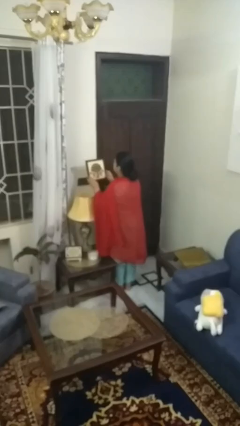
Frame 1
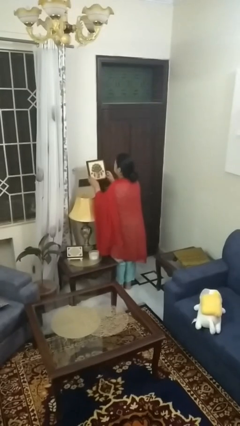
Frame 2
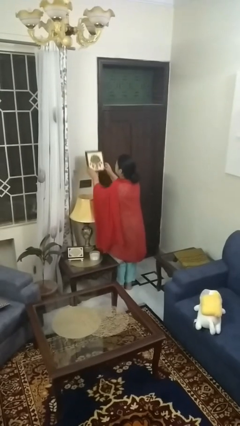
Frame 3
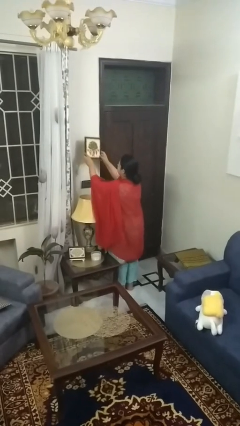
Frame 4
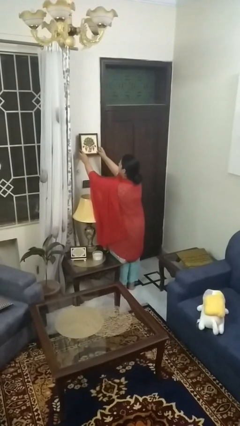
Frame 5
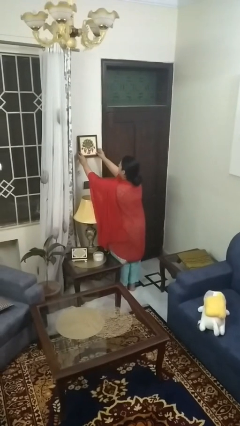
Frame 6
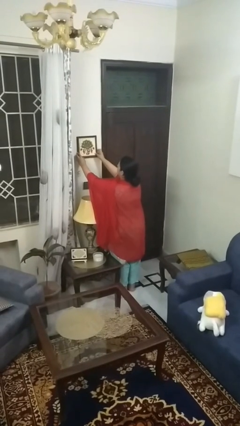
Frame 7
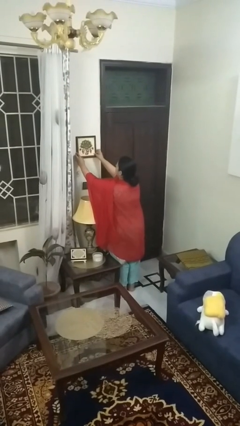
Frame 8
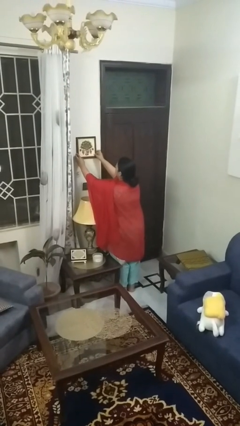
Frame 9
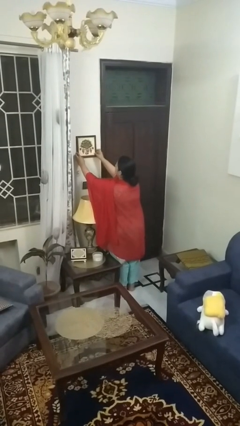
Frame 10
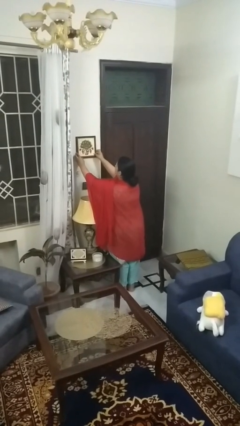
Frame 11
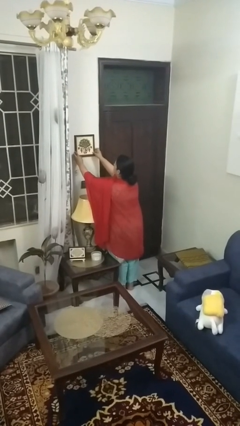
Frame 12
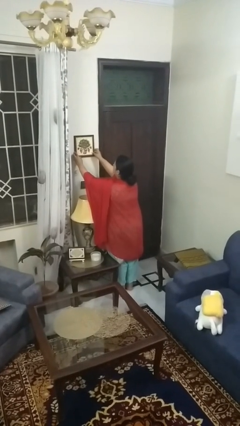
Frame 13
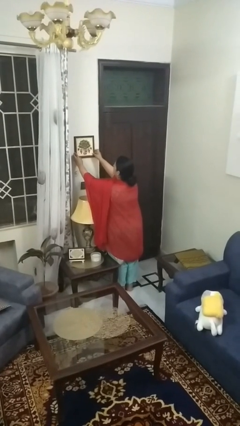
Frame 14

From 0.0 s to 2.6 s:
person puts up picture frame

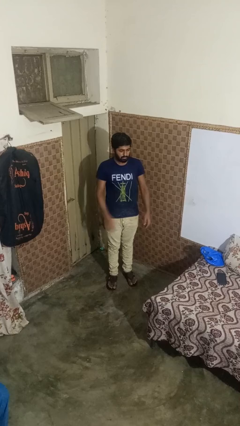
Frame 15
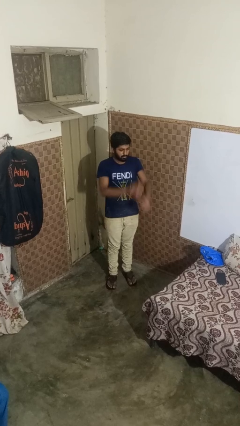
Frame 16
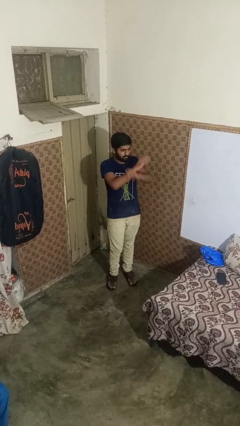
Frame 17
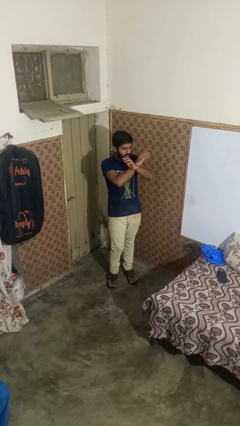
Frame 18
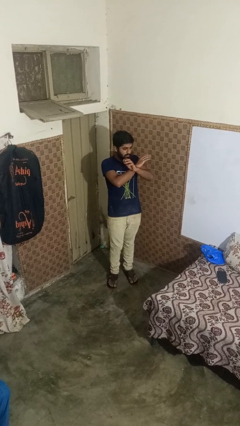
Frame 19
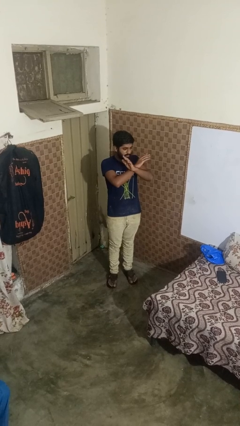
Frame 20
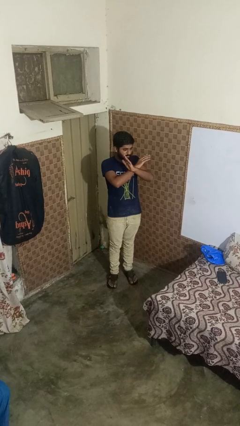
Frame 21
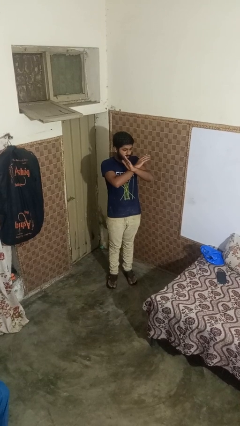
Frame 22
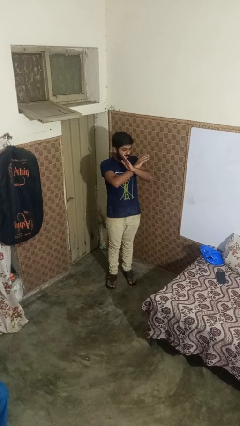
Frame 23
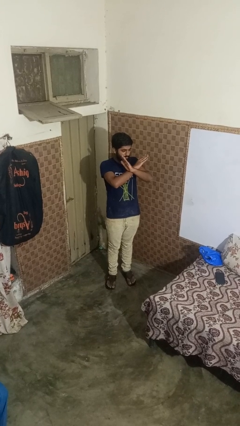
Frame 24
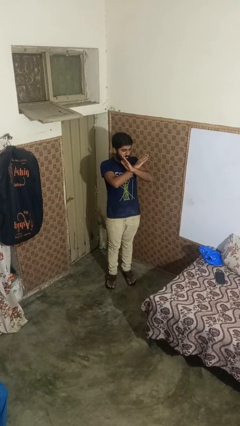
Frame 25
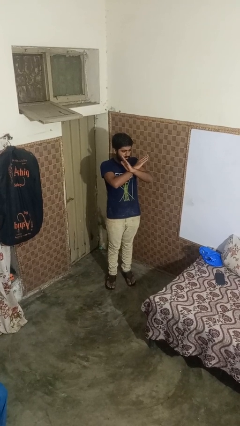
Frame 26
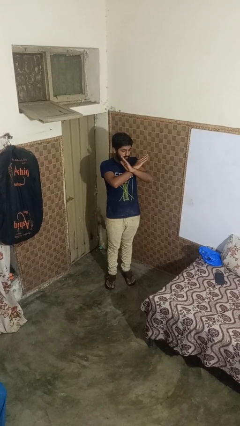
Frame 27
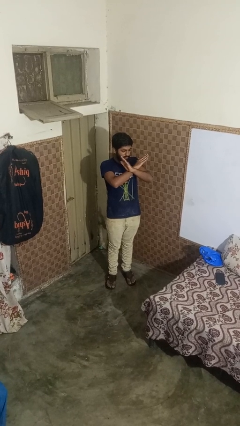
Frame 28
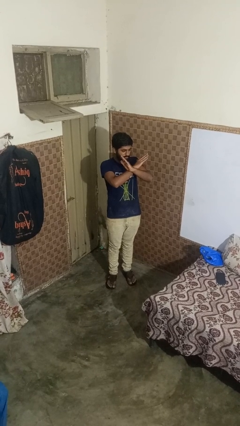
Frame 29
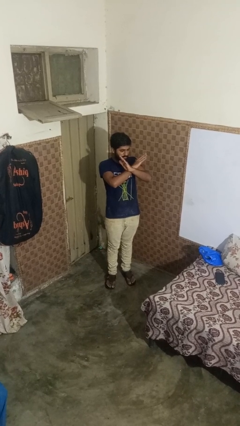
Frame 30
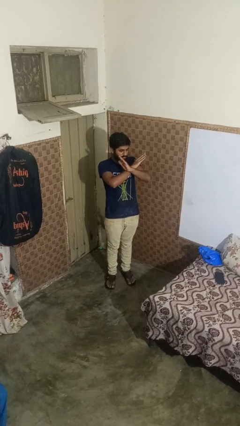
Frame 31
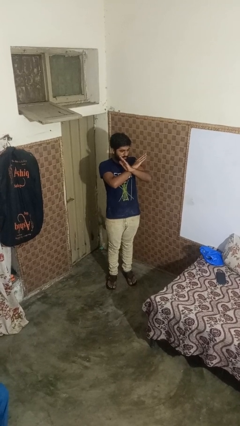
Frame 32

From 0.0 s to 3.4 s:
person gestures arms x

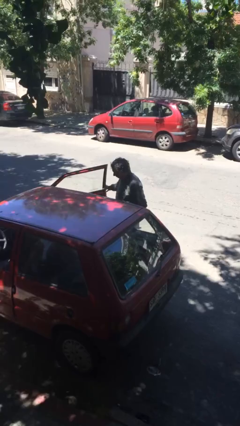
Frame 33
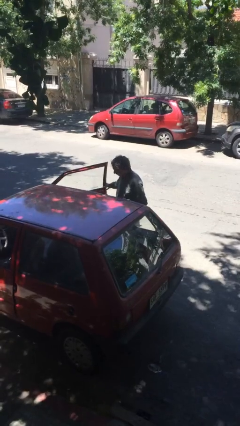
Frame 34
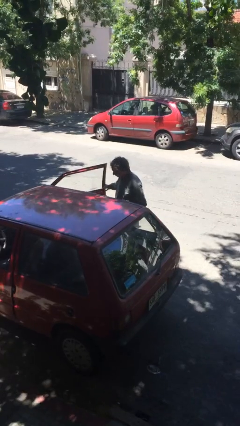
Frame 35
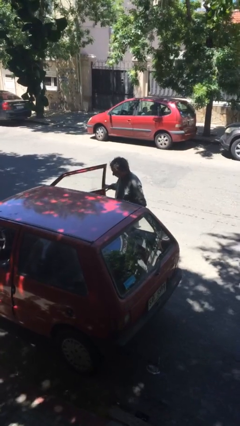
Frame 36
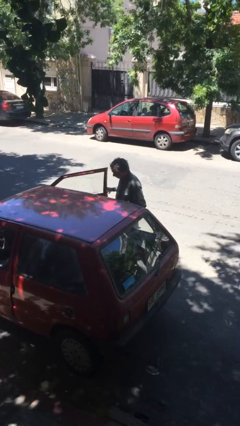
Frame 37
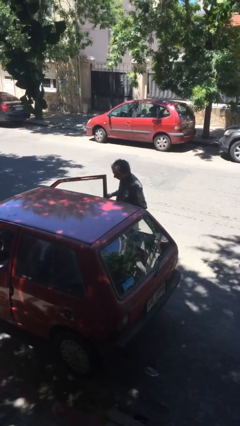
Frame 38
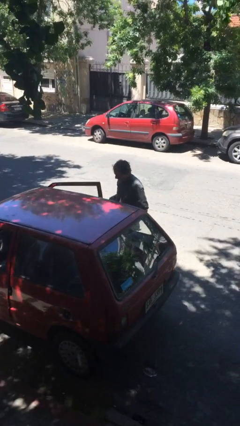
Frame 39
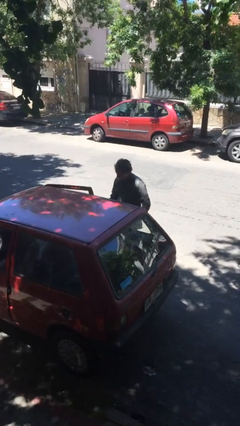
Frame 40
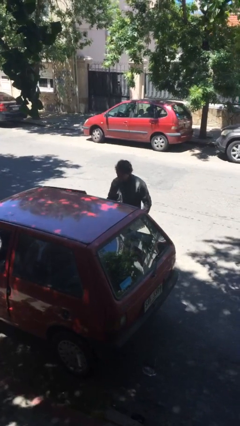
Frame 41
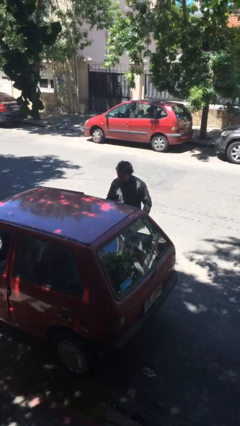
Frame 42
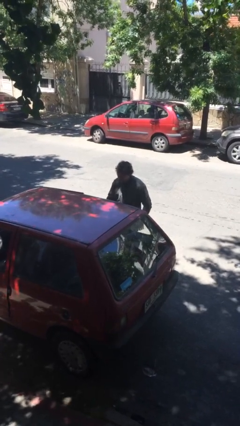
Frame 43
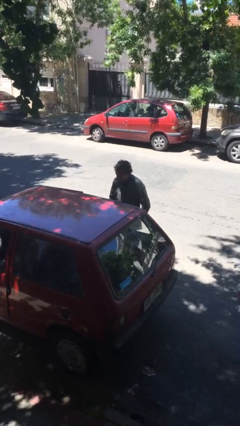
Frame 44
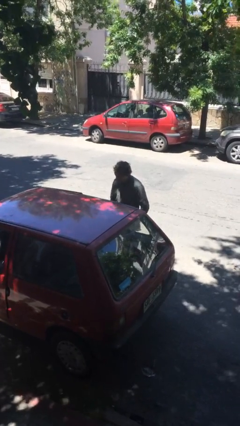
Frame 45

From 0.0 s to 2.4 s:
person closes car door

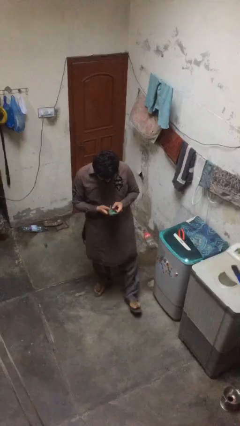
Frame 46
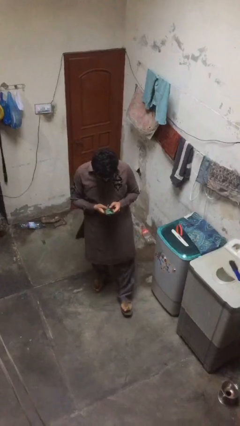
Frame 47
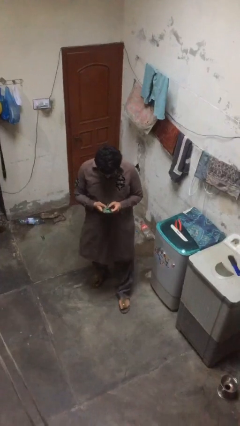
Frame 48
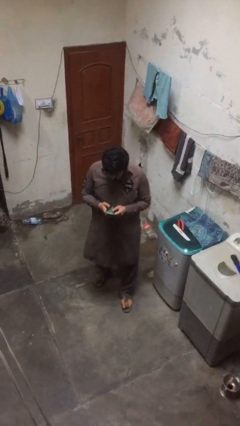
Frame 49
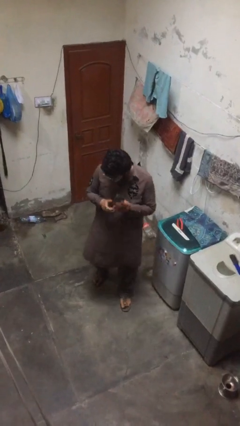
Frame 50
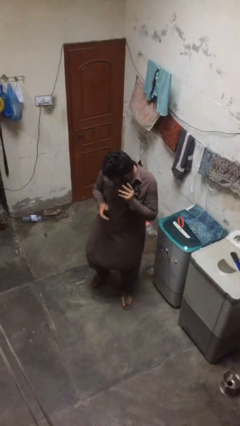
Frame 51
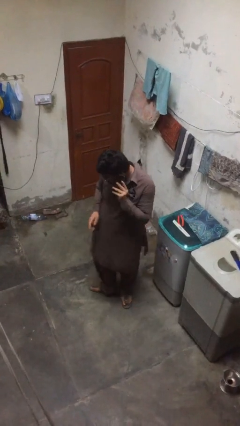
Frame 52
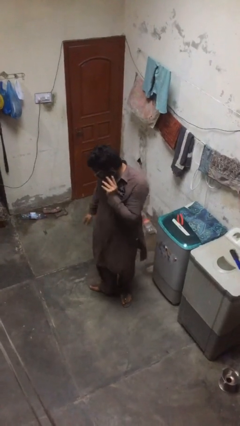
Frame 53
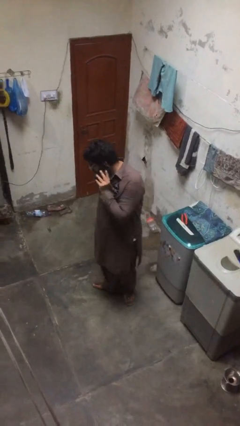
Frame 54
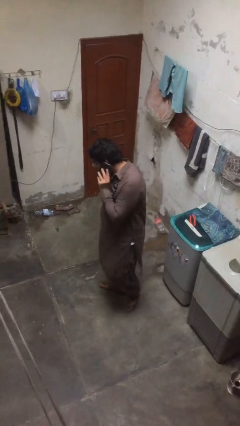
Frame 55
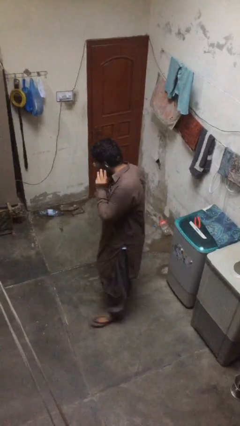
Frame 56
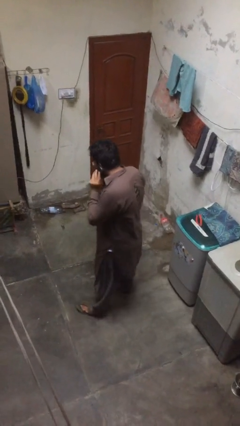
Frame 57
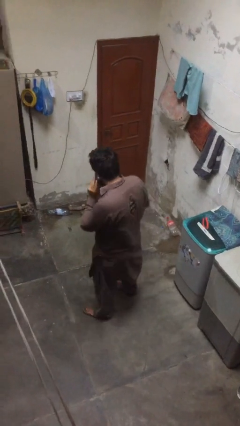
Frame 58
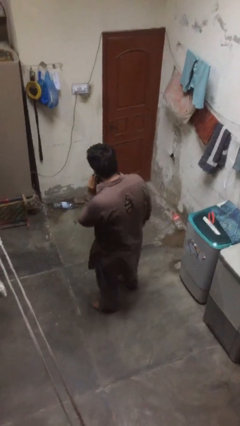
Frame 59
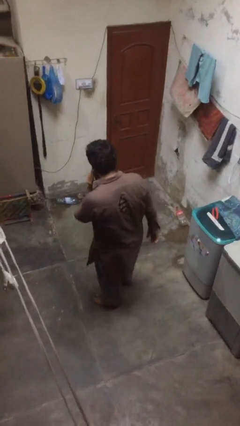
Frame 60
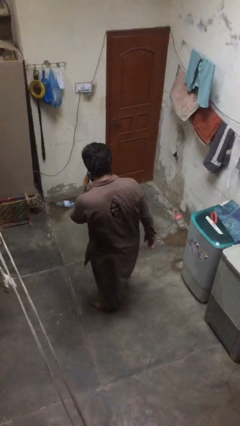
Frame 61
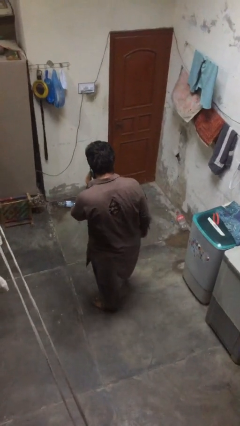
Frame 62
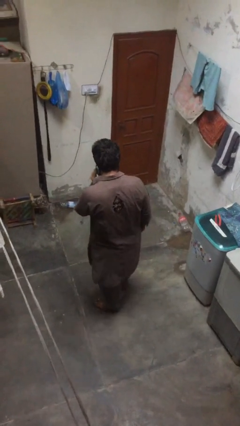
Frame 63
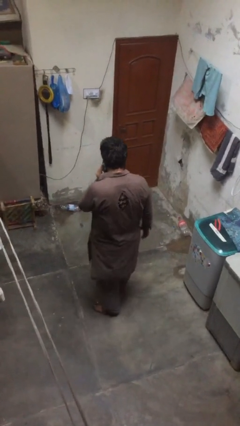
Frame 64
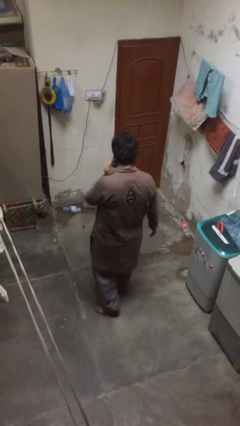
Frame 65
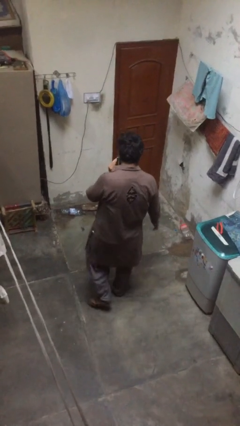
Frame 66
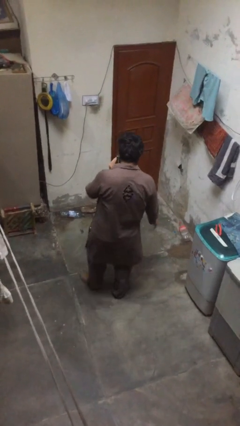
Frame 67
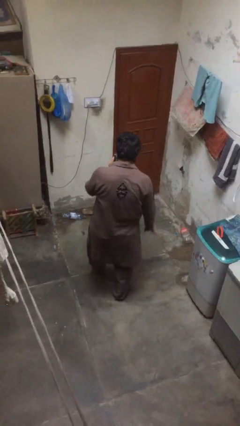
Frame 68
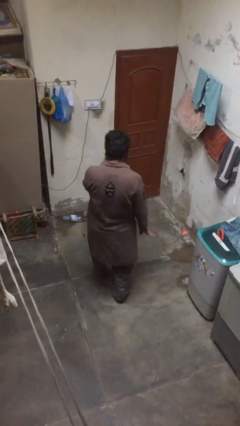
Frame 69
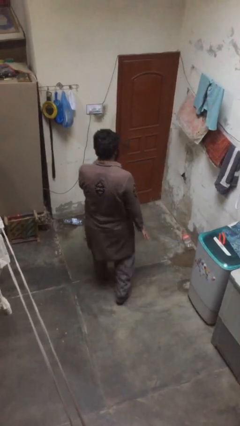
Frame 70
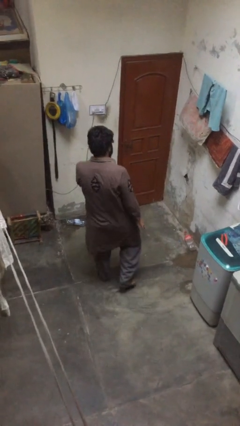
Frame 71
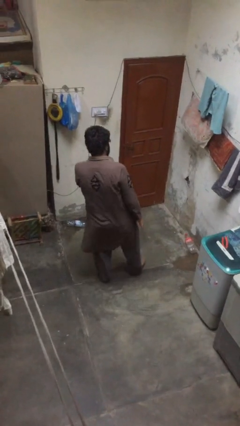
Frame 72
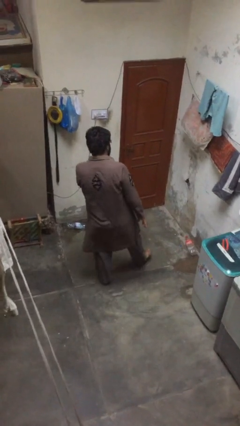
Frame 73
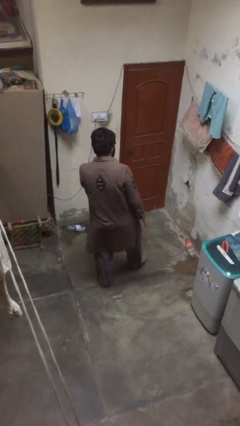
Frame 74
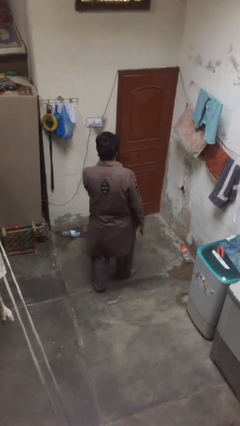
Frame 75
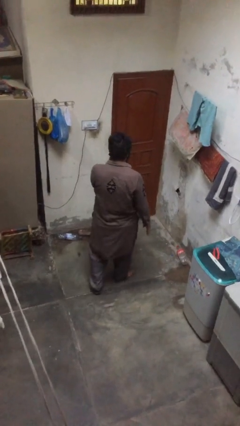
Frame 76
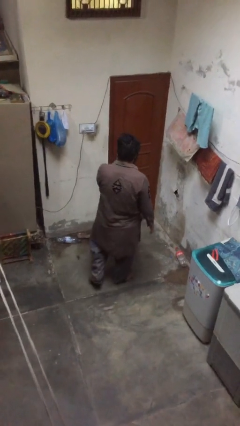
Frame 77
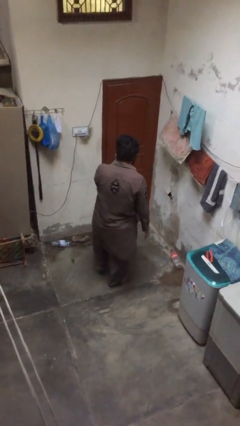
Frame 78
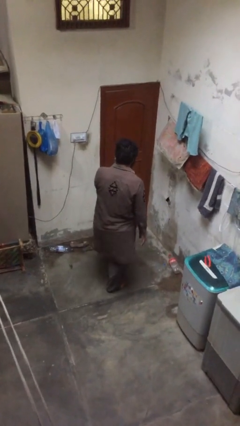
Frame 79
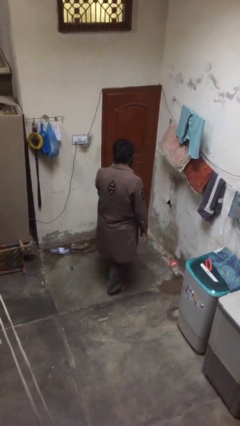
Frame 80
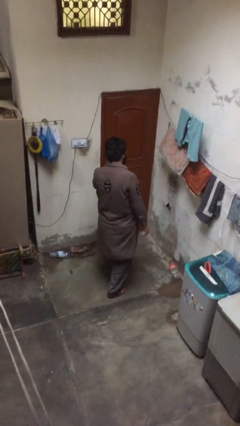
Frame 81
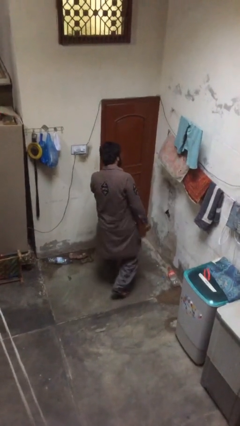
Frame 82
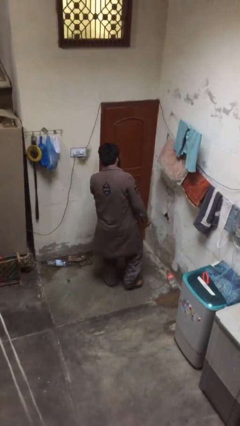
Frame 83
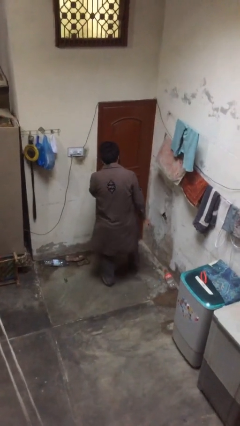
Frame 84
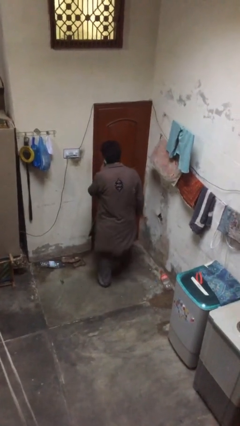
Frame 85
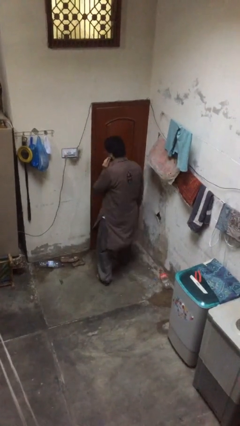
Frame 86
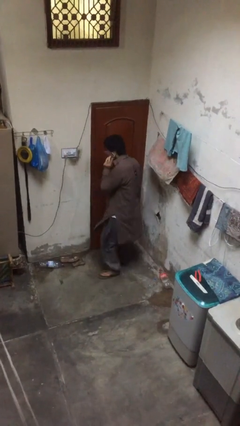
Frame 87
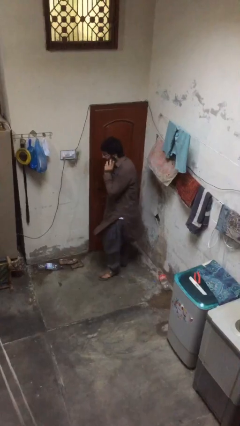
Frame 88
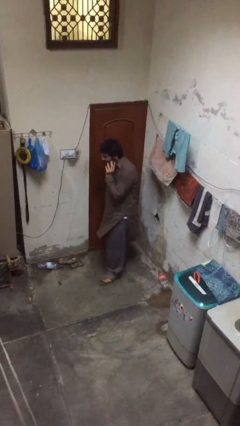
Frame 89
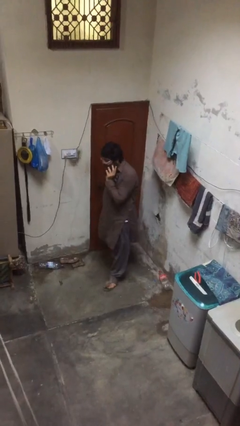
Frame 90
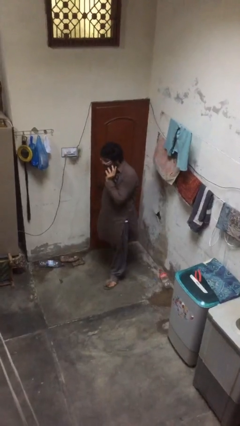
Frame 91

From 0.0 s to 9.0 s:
person talks on phone
